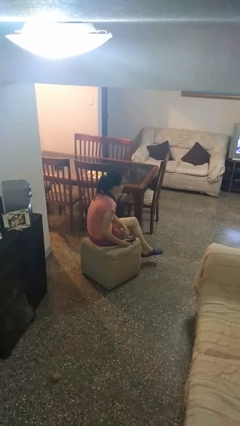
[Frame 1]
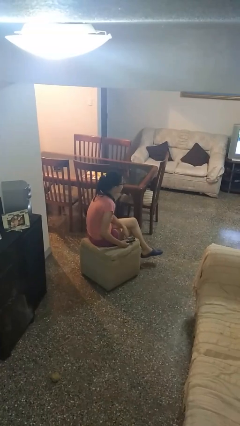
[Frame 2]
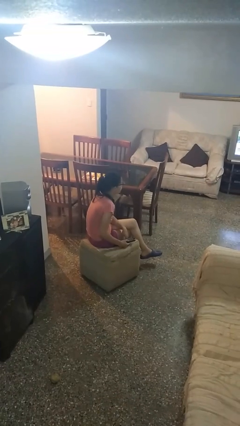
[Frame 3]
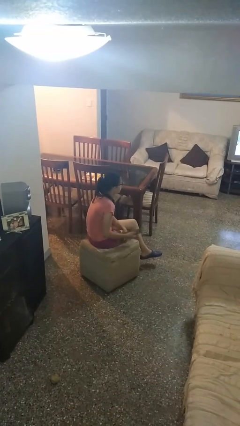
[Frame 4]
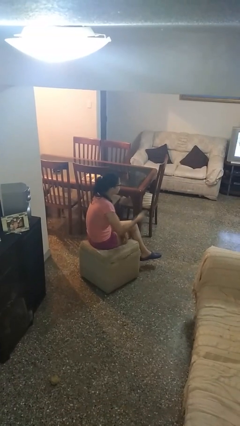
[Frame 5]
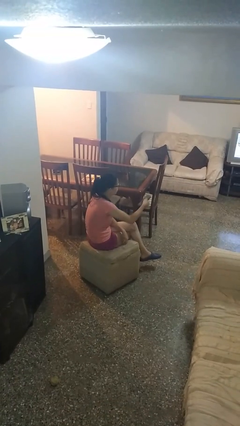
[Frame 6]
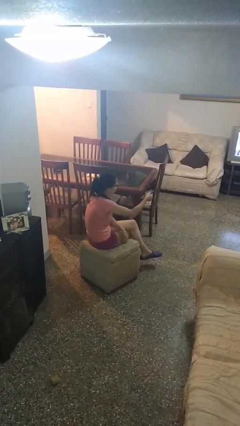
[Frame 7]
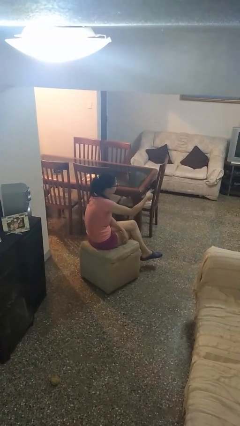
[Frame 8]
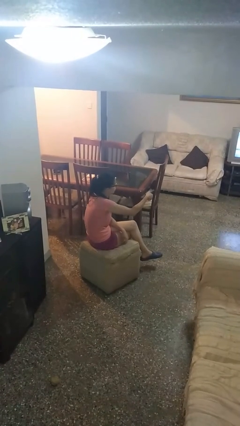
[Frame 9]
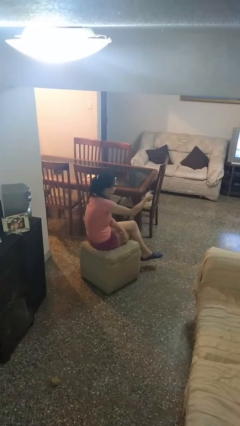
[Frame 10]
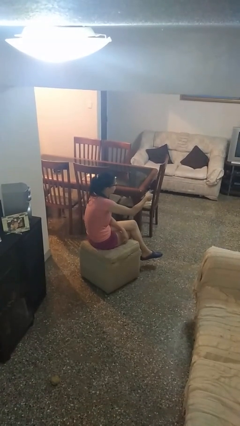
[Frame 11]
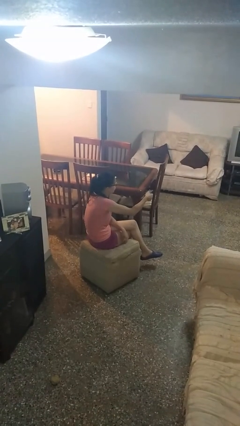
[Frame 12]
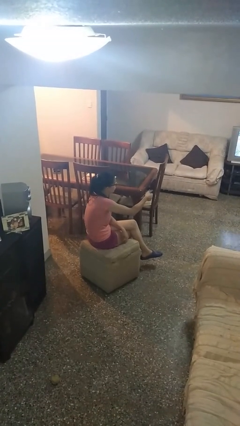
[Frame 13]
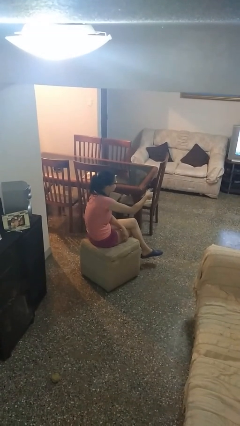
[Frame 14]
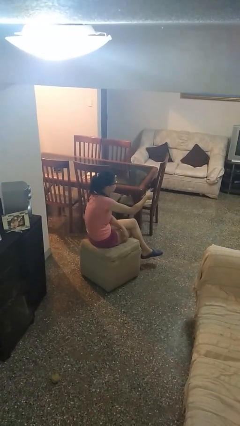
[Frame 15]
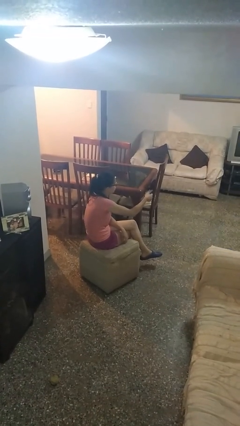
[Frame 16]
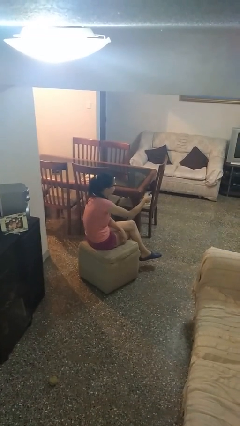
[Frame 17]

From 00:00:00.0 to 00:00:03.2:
person uses television remote

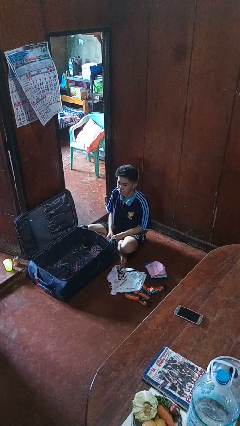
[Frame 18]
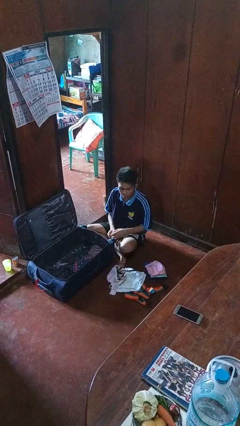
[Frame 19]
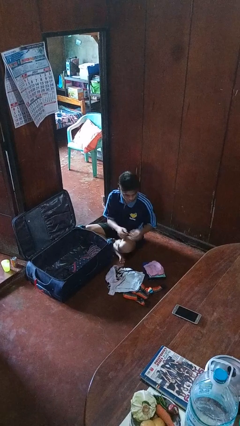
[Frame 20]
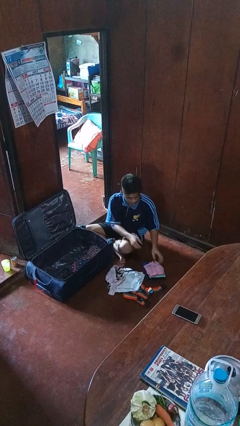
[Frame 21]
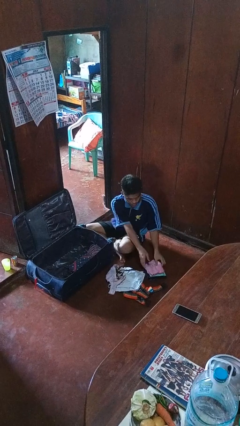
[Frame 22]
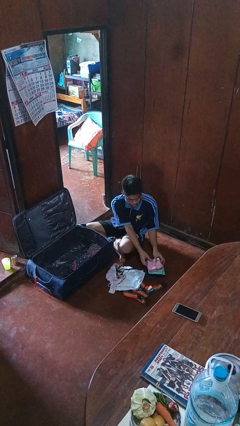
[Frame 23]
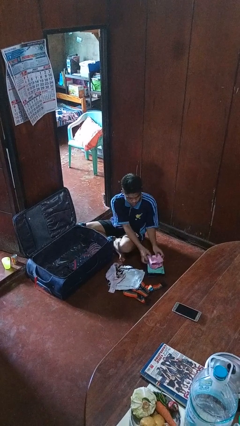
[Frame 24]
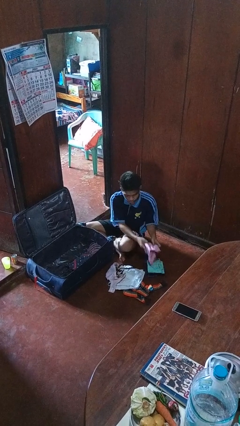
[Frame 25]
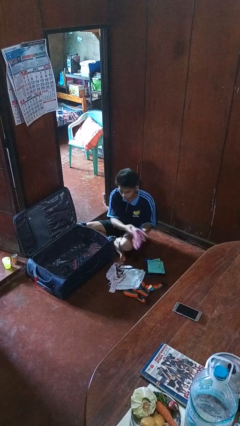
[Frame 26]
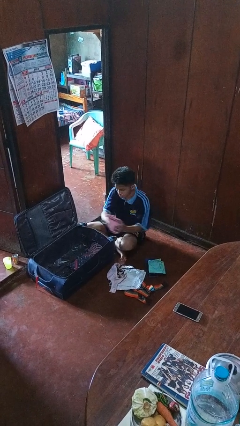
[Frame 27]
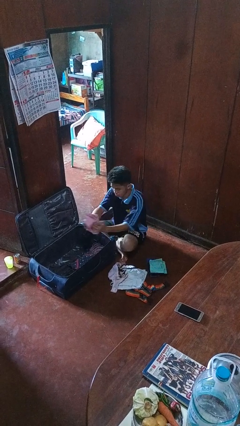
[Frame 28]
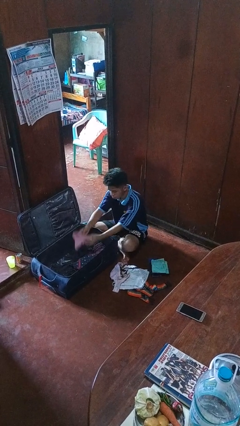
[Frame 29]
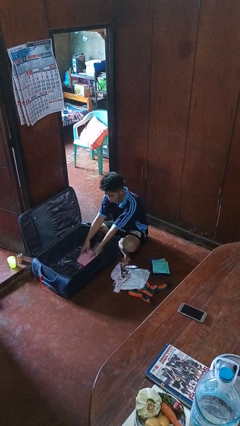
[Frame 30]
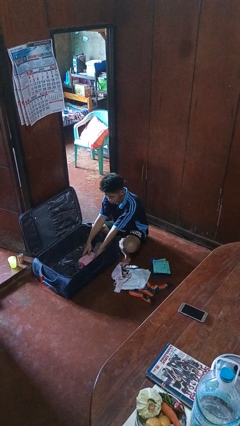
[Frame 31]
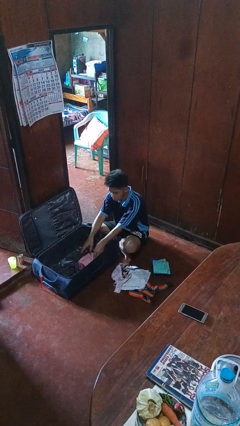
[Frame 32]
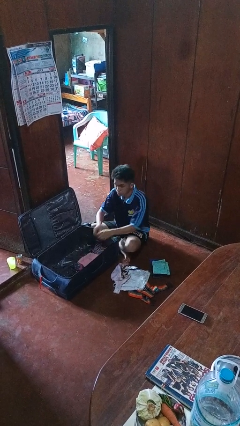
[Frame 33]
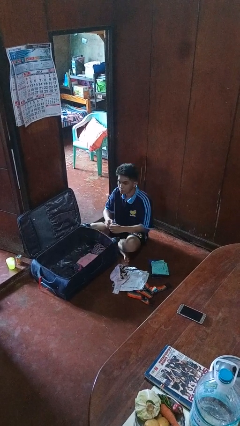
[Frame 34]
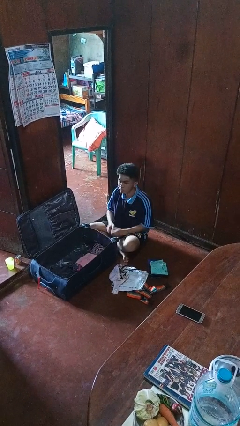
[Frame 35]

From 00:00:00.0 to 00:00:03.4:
person loads clothes into suitcase

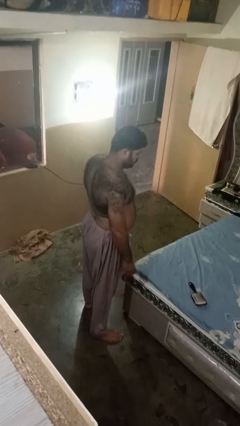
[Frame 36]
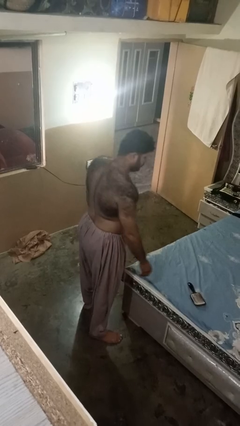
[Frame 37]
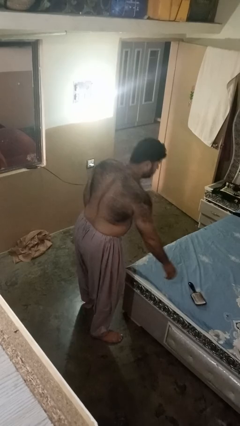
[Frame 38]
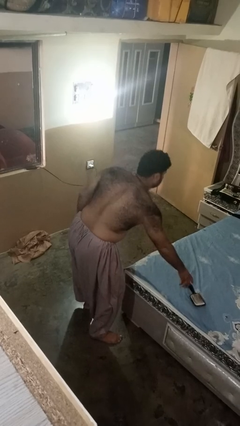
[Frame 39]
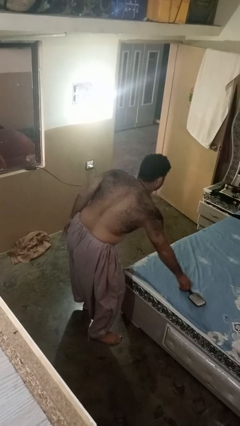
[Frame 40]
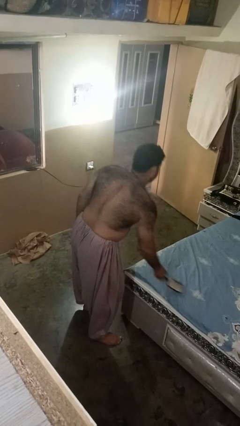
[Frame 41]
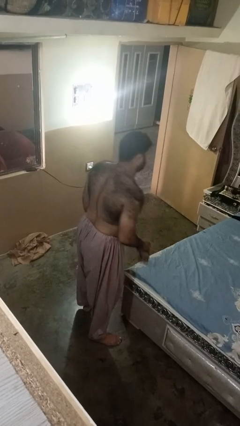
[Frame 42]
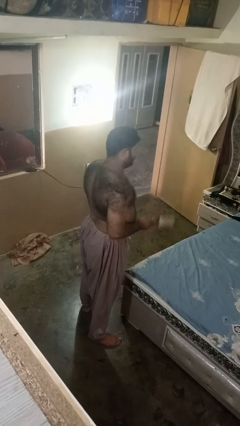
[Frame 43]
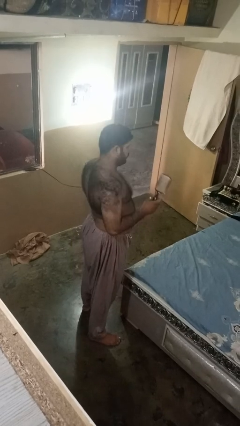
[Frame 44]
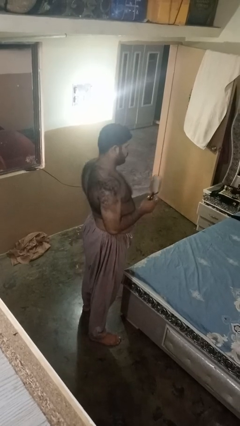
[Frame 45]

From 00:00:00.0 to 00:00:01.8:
person picks up object from bed

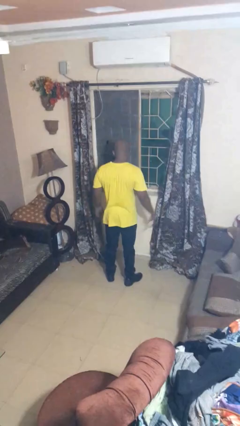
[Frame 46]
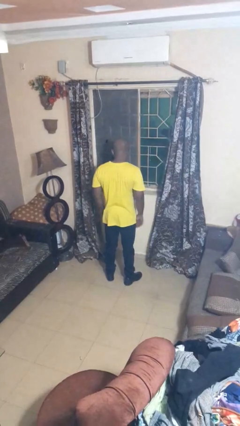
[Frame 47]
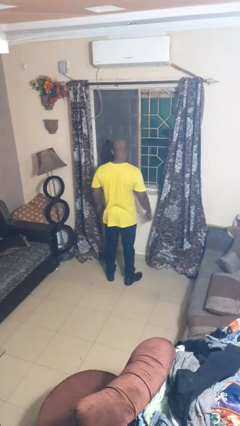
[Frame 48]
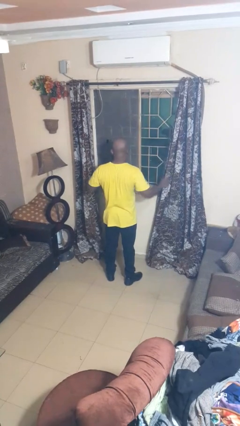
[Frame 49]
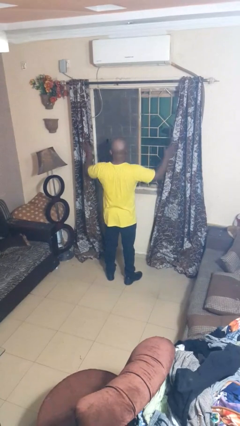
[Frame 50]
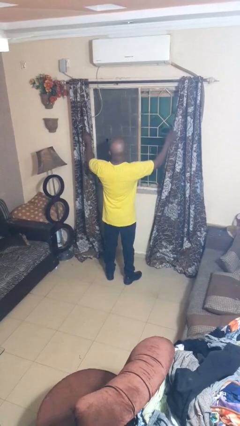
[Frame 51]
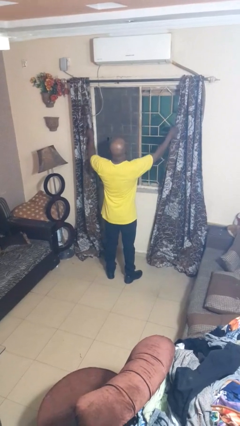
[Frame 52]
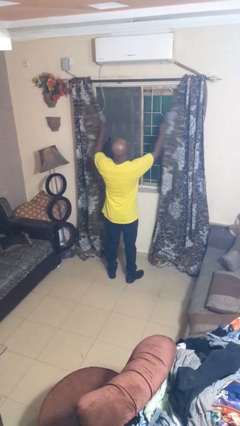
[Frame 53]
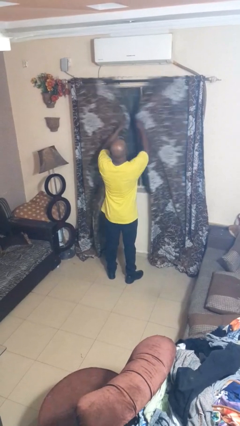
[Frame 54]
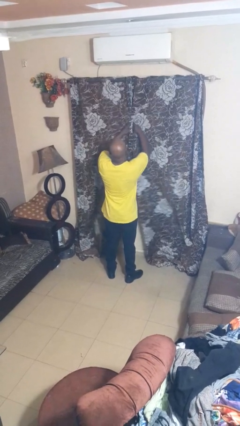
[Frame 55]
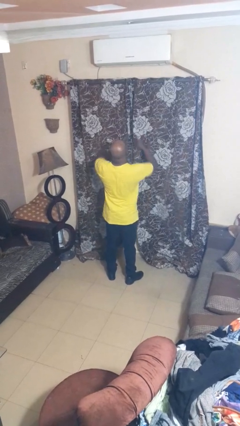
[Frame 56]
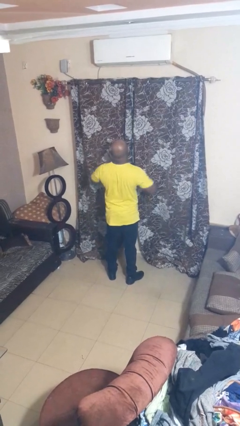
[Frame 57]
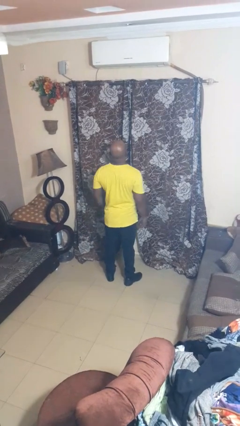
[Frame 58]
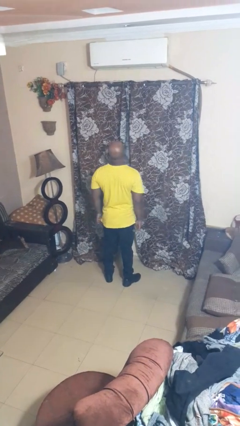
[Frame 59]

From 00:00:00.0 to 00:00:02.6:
person closes curtains

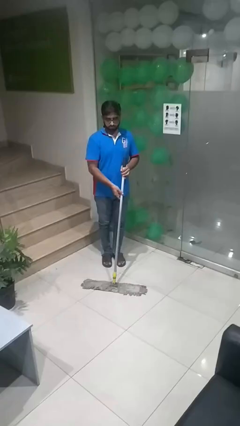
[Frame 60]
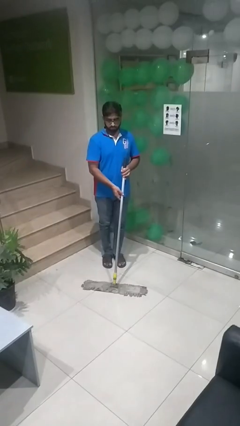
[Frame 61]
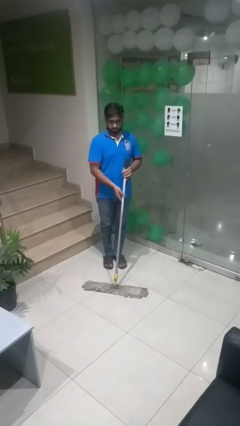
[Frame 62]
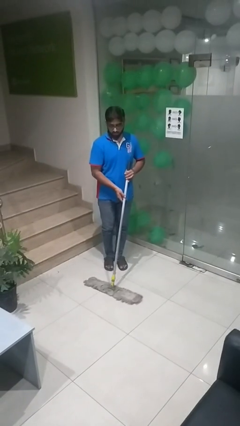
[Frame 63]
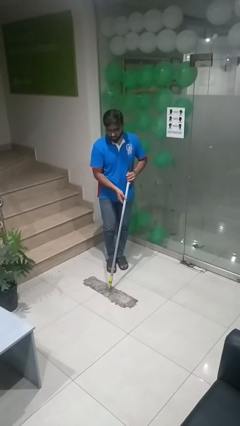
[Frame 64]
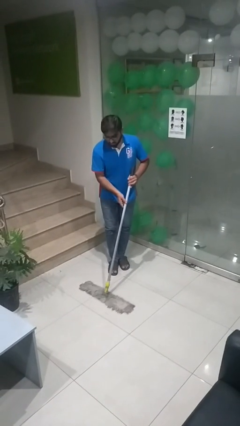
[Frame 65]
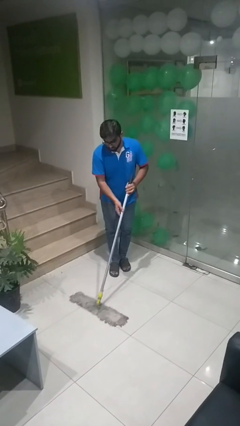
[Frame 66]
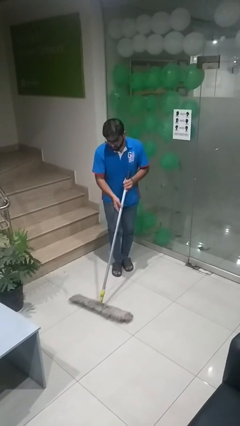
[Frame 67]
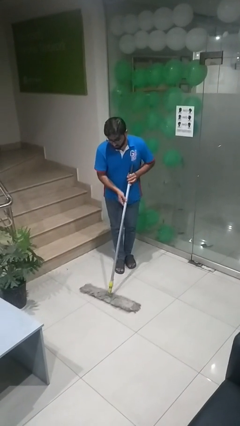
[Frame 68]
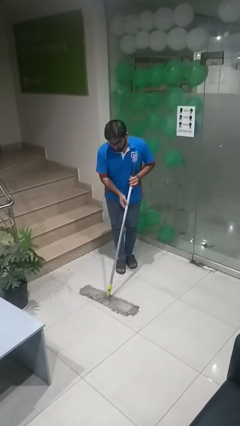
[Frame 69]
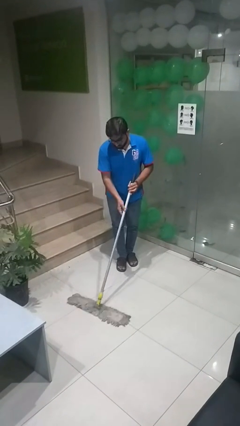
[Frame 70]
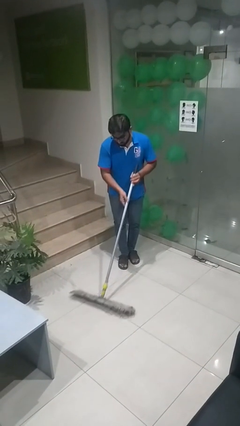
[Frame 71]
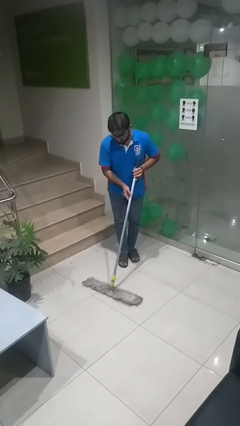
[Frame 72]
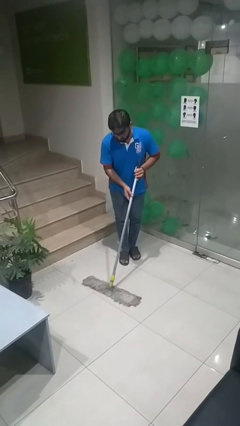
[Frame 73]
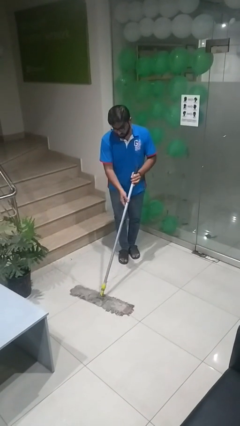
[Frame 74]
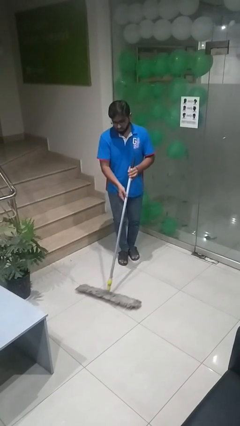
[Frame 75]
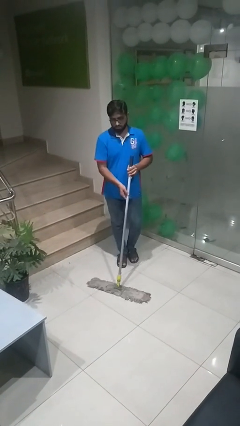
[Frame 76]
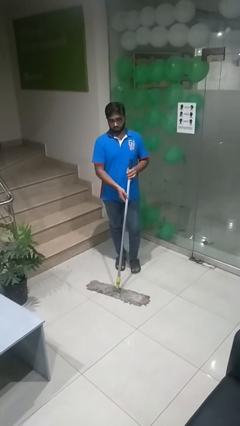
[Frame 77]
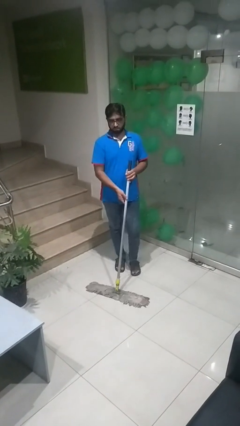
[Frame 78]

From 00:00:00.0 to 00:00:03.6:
person mops

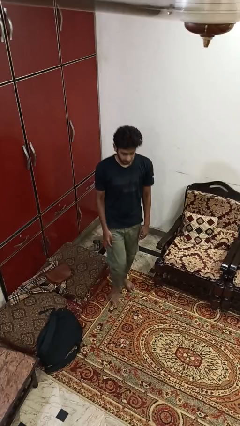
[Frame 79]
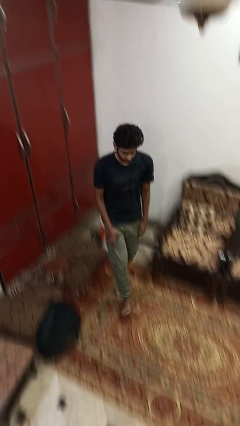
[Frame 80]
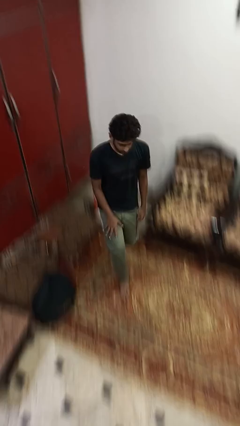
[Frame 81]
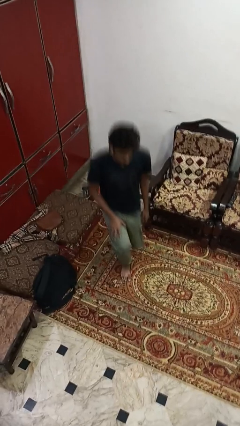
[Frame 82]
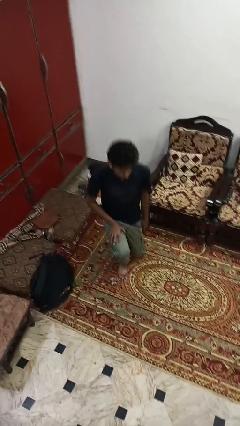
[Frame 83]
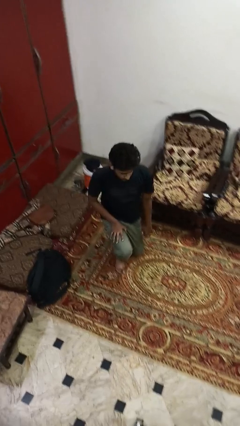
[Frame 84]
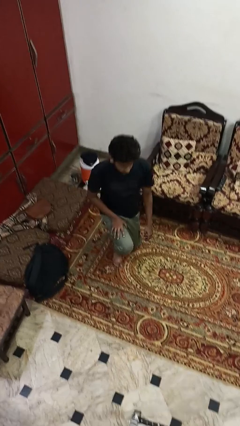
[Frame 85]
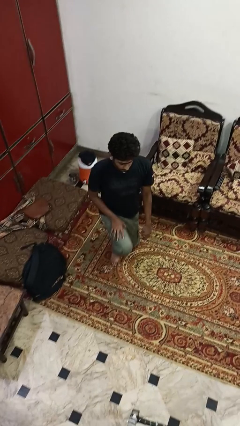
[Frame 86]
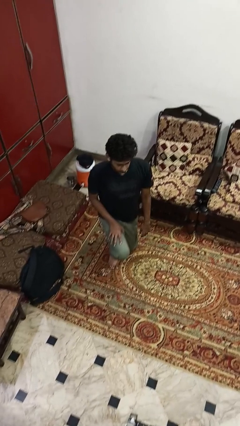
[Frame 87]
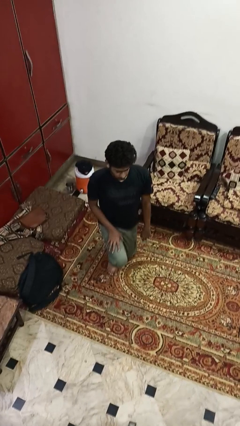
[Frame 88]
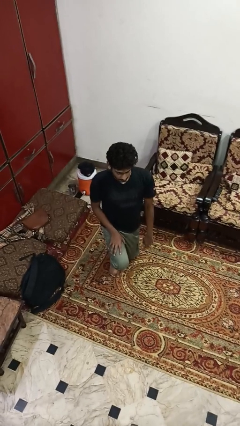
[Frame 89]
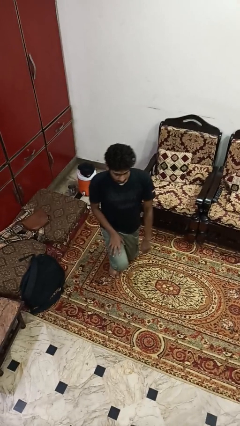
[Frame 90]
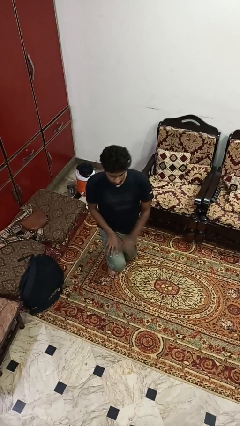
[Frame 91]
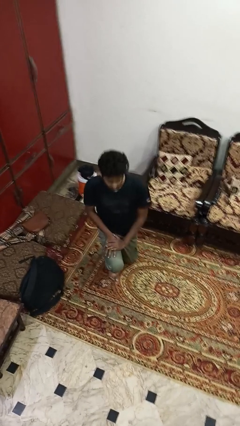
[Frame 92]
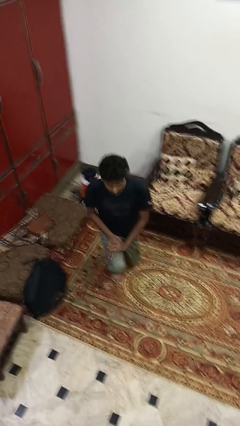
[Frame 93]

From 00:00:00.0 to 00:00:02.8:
person kneels
